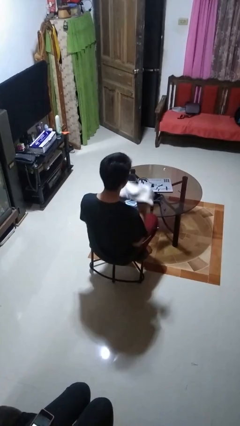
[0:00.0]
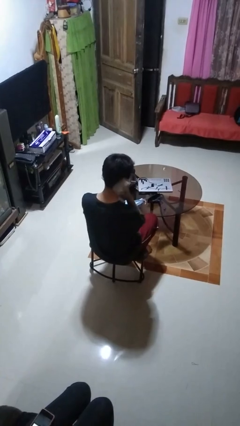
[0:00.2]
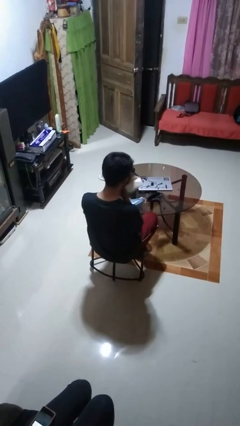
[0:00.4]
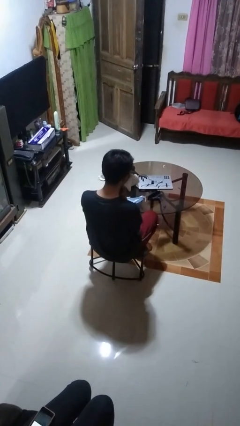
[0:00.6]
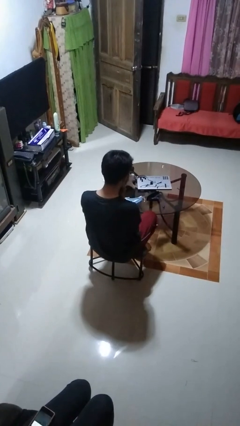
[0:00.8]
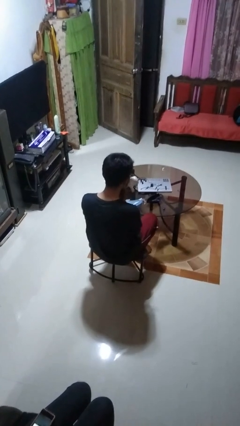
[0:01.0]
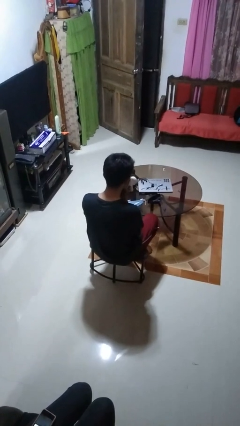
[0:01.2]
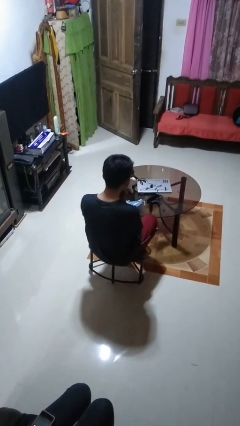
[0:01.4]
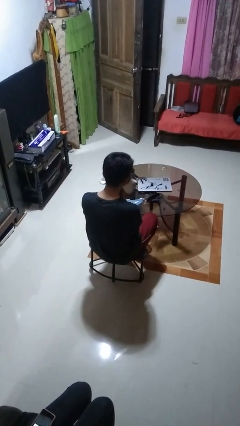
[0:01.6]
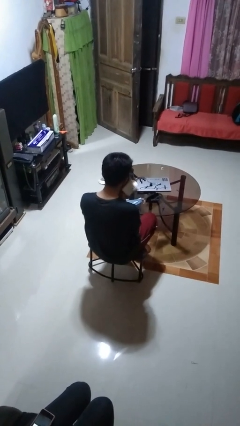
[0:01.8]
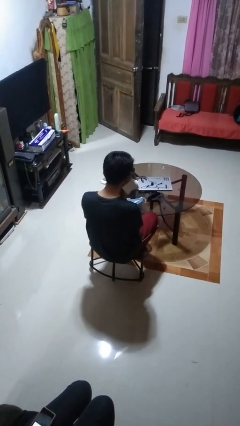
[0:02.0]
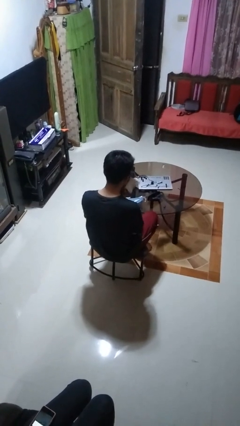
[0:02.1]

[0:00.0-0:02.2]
person wipes mouth with napkin

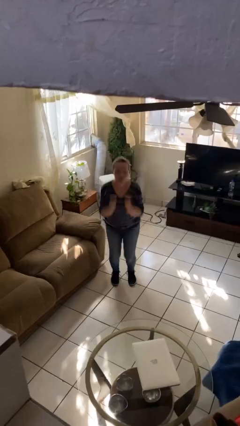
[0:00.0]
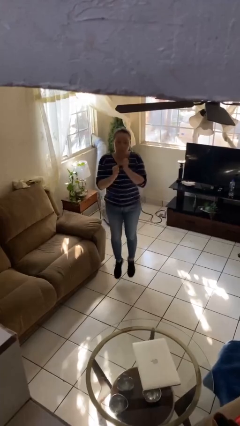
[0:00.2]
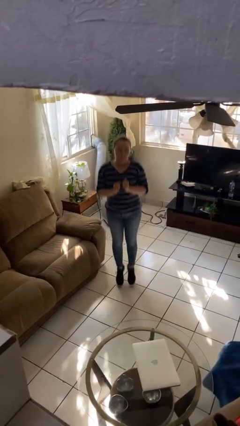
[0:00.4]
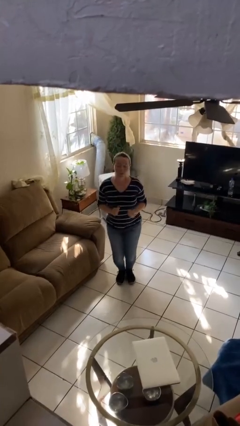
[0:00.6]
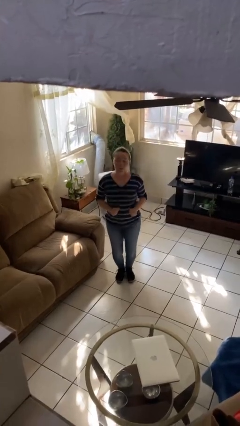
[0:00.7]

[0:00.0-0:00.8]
person jumps

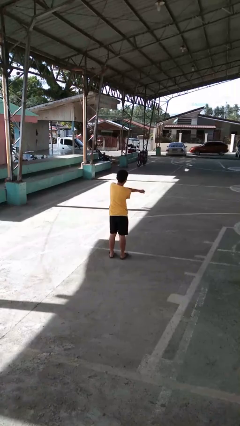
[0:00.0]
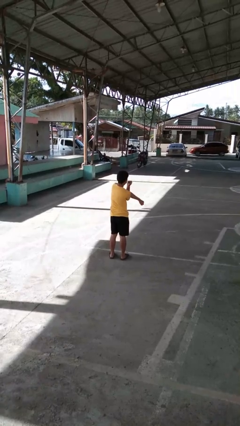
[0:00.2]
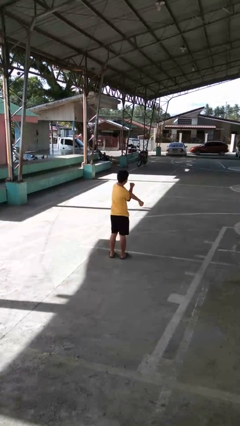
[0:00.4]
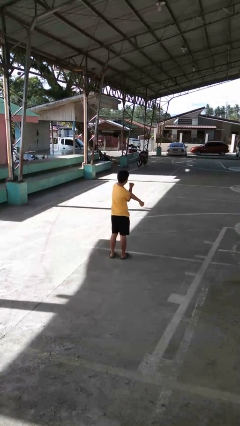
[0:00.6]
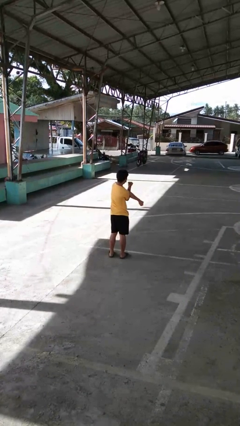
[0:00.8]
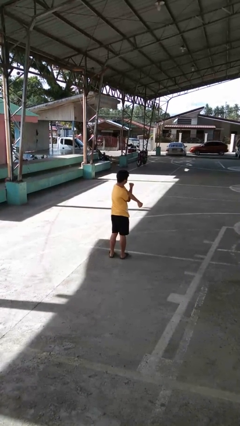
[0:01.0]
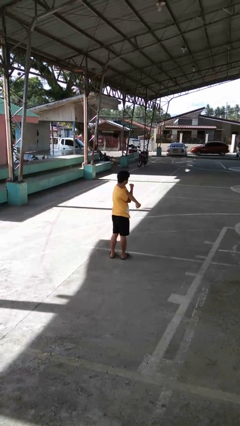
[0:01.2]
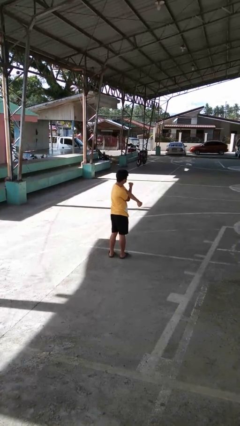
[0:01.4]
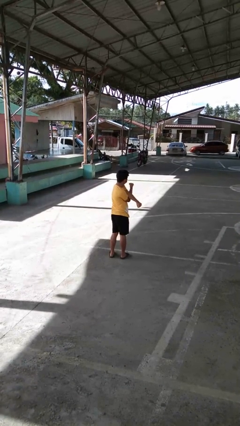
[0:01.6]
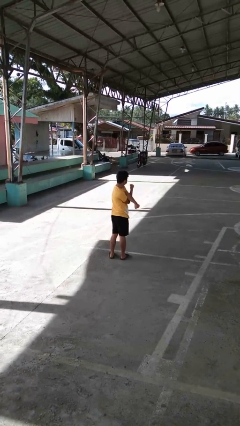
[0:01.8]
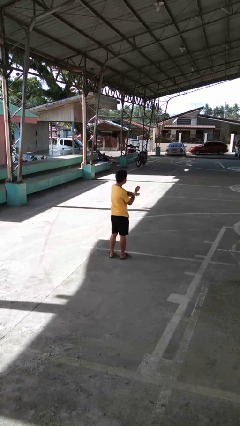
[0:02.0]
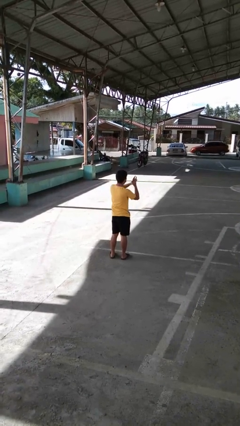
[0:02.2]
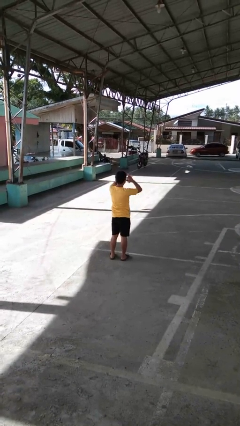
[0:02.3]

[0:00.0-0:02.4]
person stretches arms to side

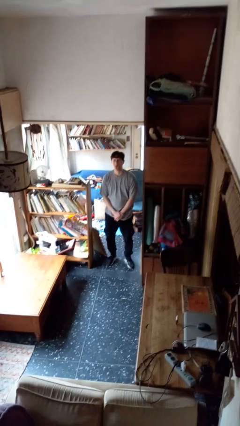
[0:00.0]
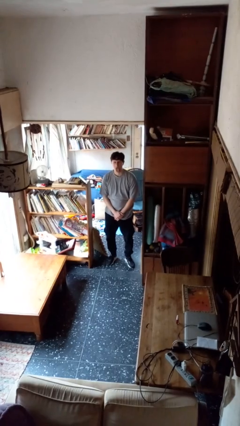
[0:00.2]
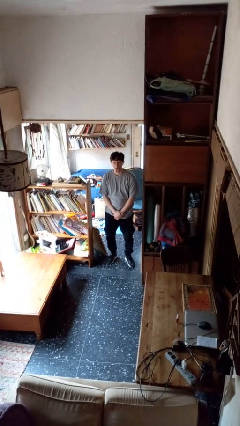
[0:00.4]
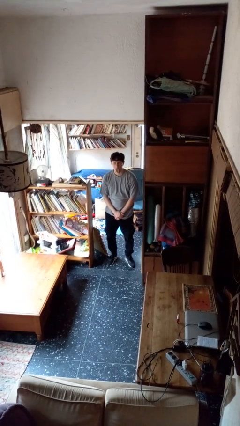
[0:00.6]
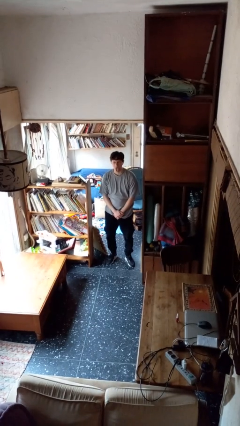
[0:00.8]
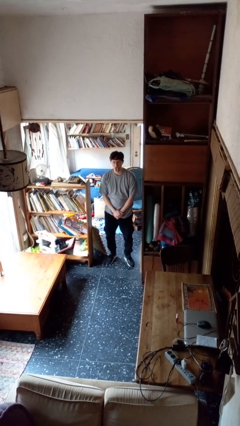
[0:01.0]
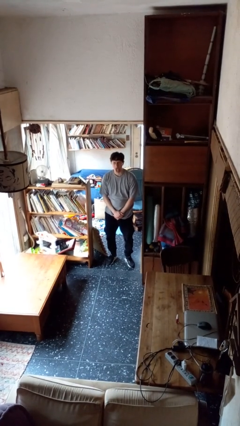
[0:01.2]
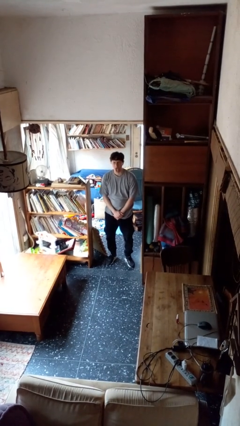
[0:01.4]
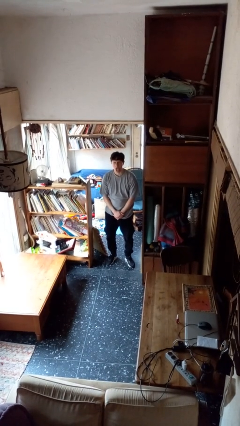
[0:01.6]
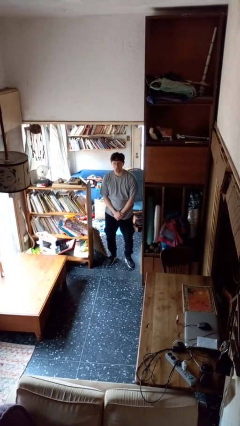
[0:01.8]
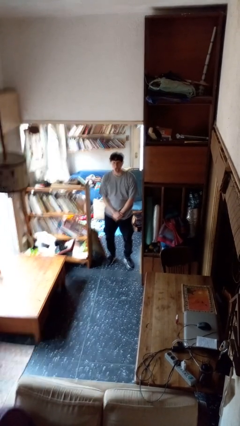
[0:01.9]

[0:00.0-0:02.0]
person sticks out tongue

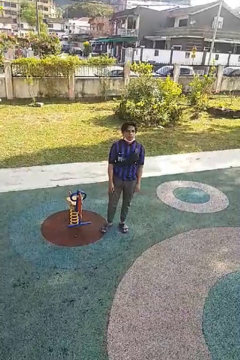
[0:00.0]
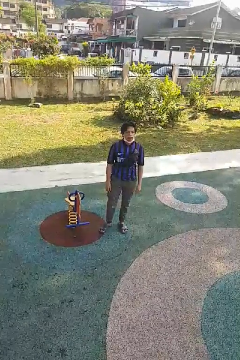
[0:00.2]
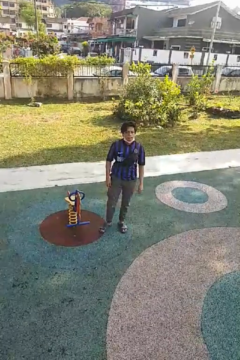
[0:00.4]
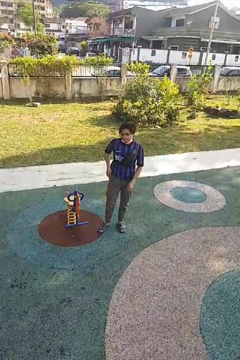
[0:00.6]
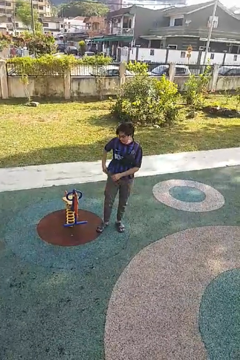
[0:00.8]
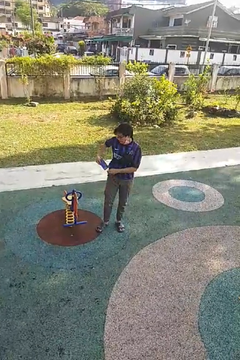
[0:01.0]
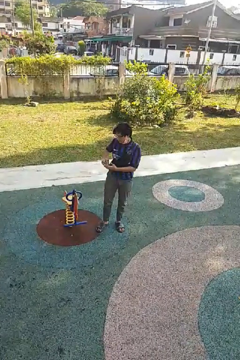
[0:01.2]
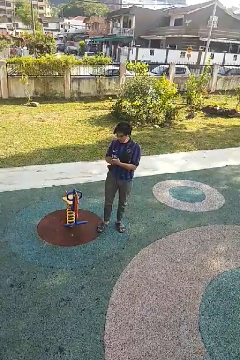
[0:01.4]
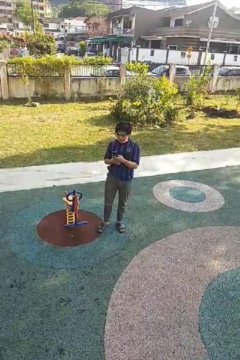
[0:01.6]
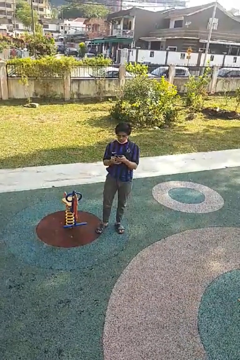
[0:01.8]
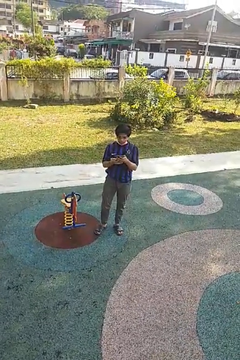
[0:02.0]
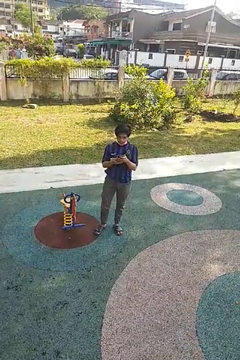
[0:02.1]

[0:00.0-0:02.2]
person takes phone from pocket

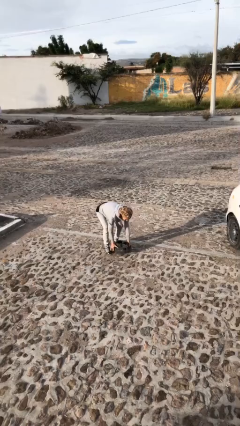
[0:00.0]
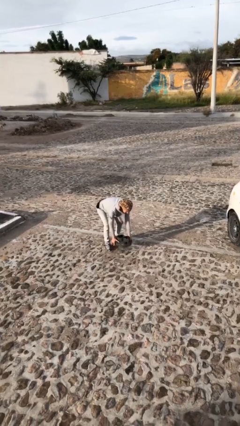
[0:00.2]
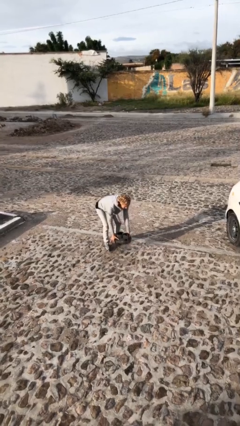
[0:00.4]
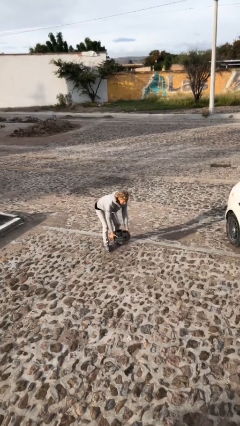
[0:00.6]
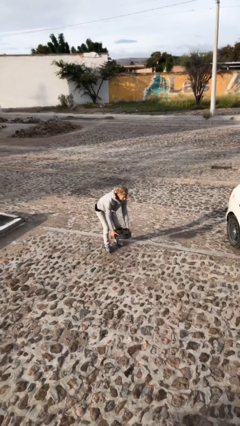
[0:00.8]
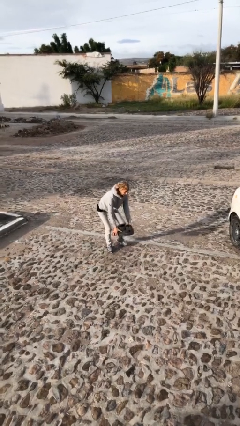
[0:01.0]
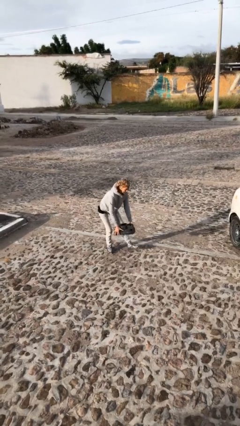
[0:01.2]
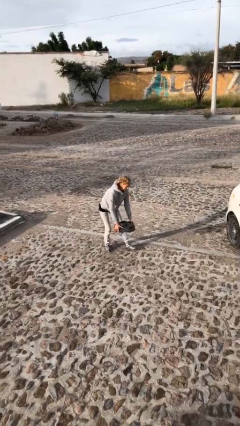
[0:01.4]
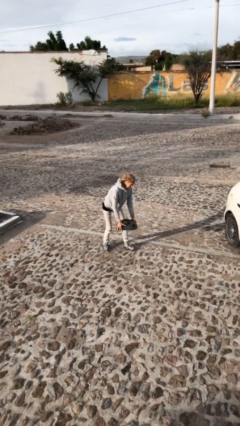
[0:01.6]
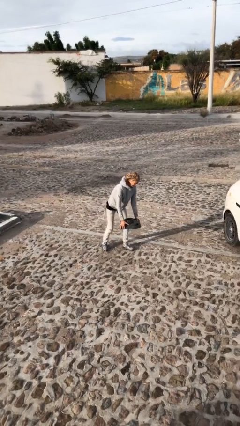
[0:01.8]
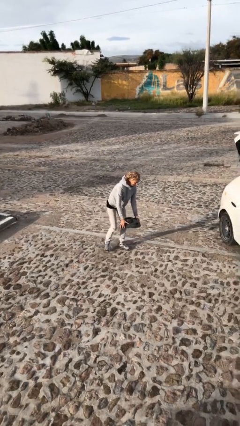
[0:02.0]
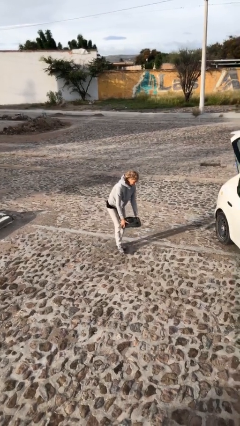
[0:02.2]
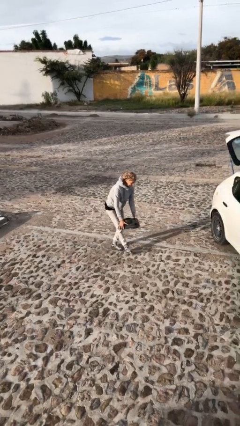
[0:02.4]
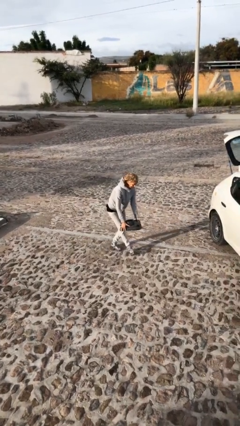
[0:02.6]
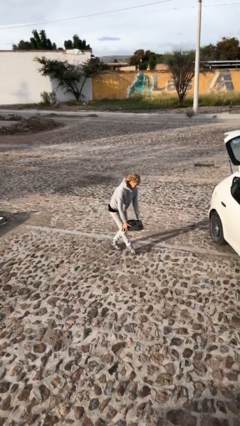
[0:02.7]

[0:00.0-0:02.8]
person carries heavy object

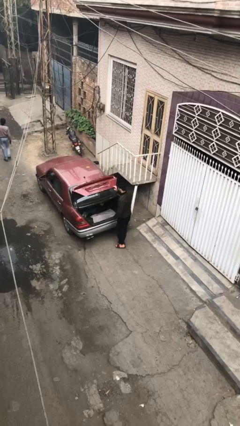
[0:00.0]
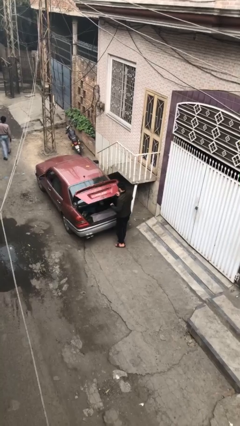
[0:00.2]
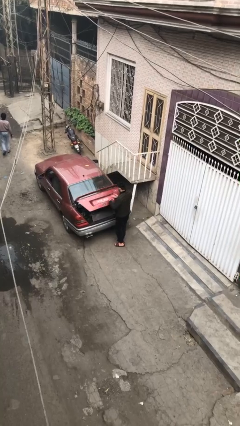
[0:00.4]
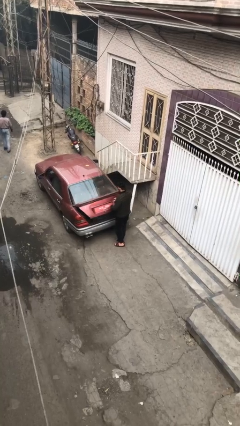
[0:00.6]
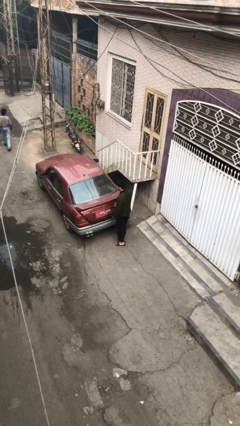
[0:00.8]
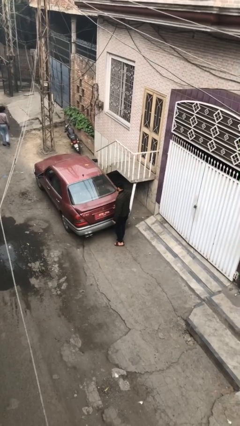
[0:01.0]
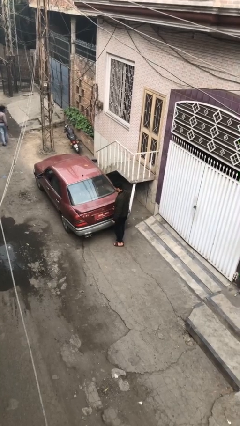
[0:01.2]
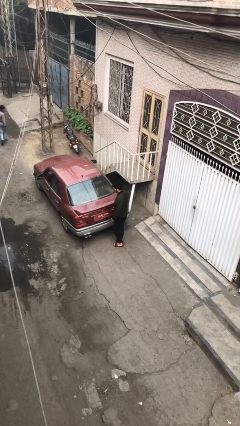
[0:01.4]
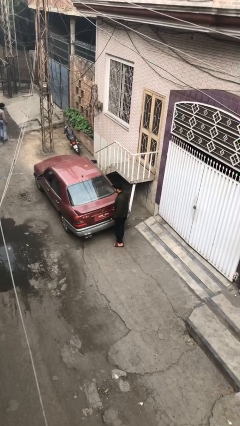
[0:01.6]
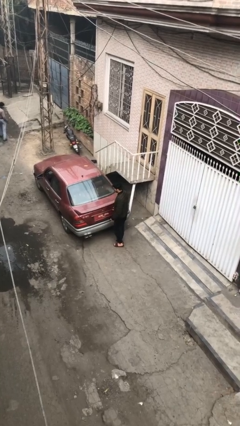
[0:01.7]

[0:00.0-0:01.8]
person closes car trunk

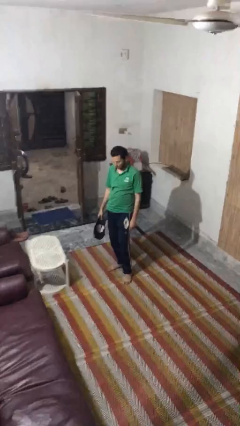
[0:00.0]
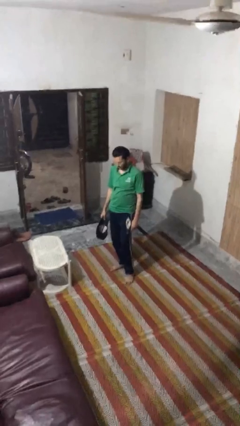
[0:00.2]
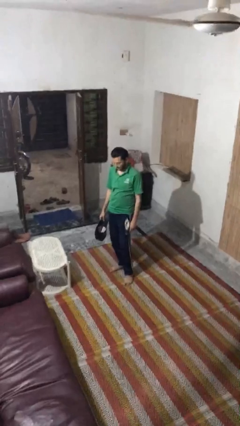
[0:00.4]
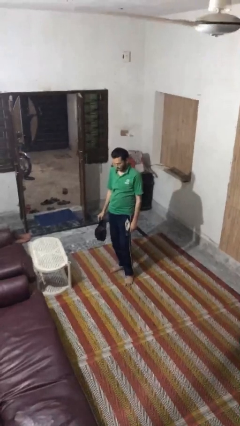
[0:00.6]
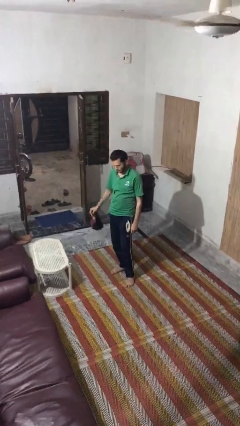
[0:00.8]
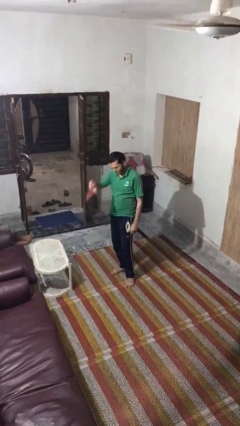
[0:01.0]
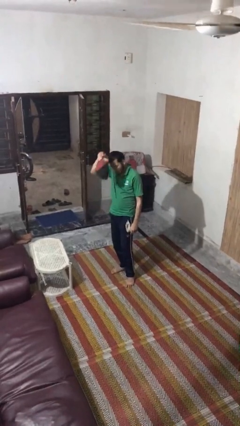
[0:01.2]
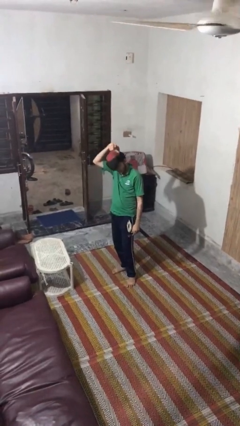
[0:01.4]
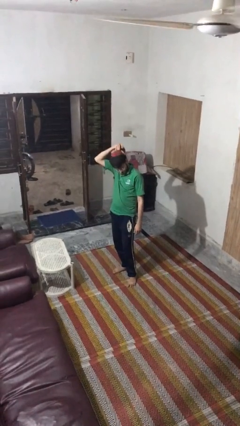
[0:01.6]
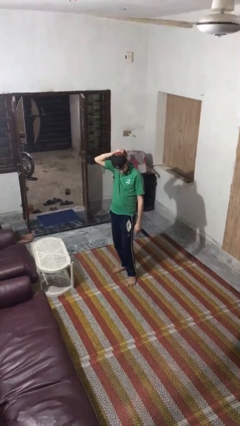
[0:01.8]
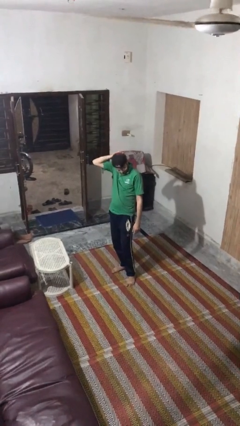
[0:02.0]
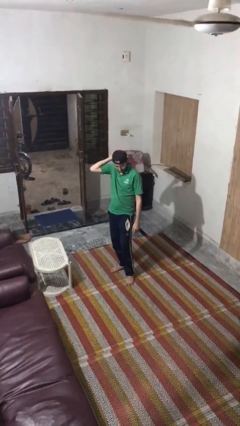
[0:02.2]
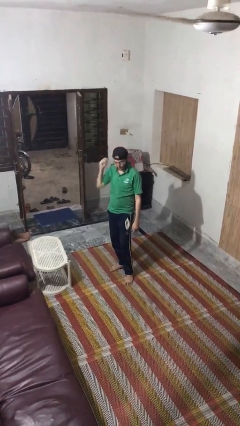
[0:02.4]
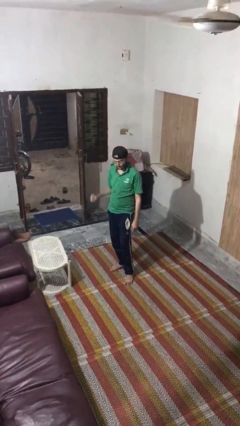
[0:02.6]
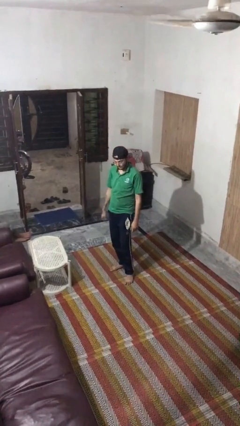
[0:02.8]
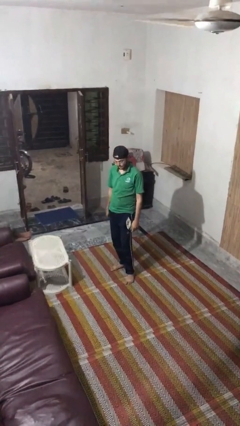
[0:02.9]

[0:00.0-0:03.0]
person puts on hat
